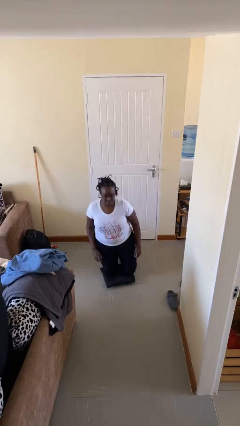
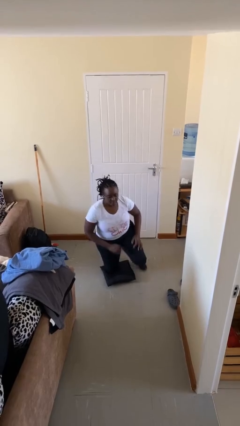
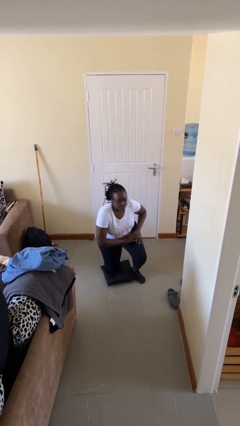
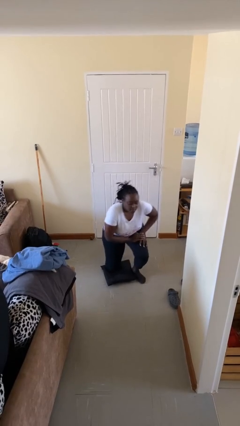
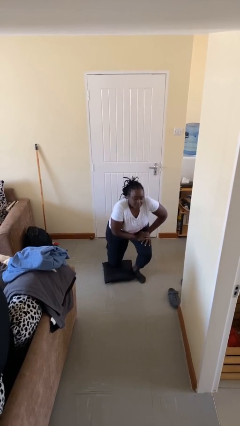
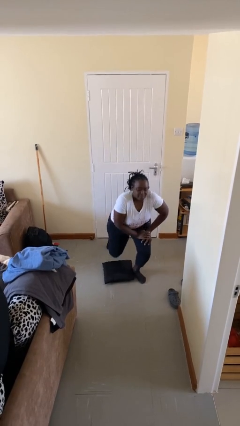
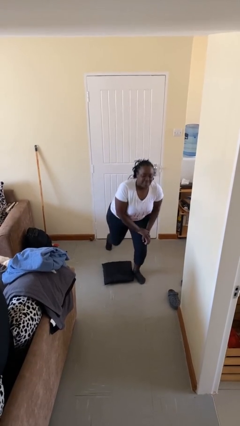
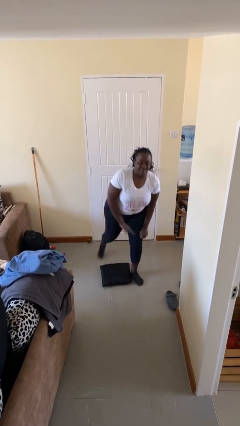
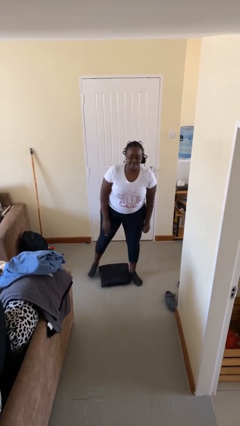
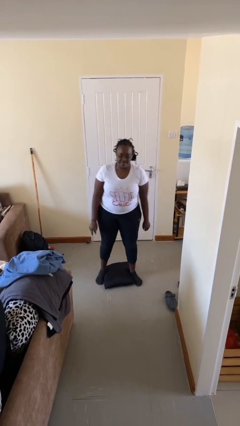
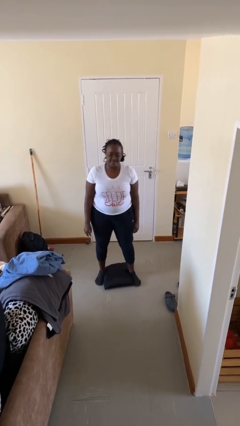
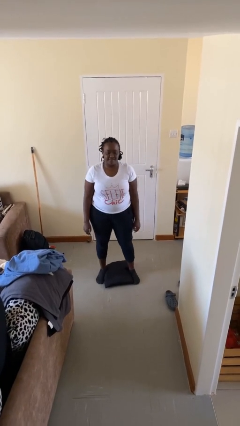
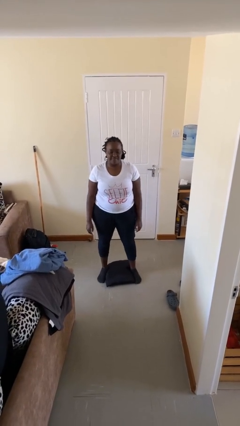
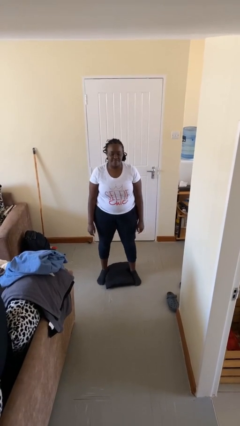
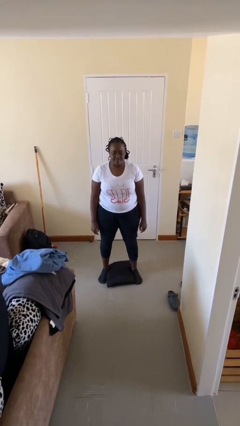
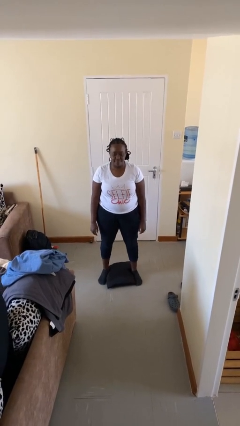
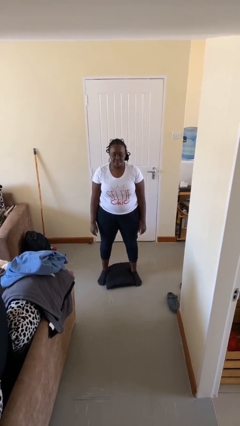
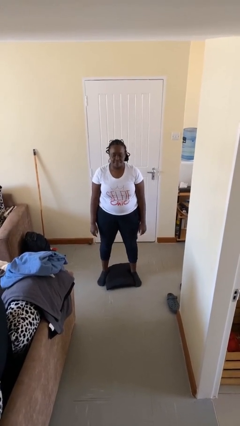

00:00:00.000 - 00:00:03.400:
person stands up from floor

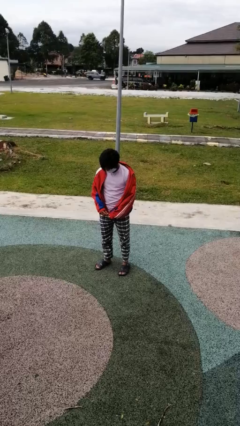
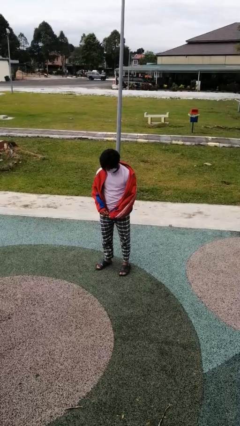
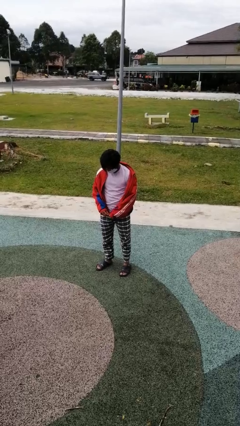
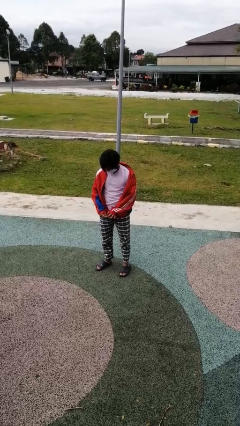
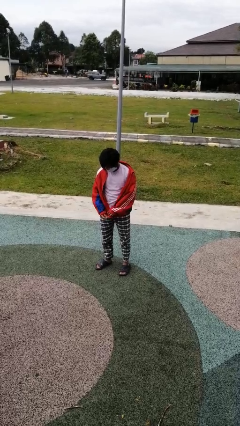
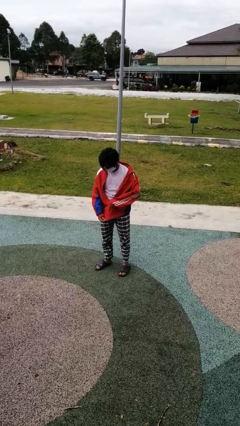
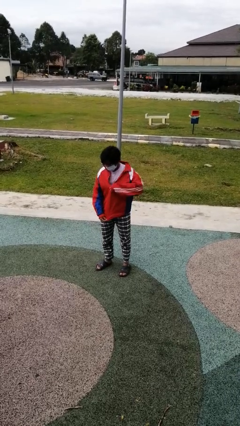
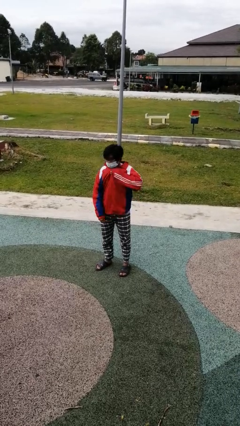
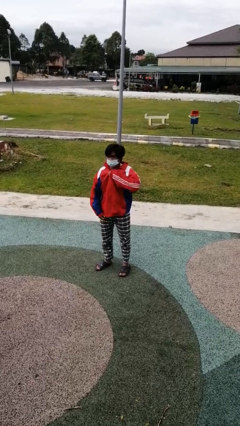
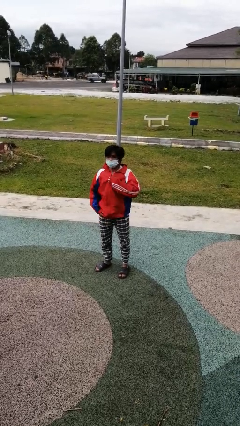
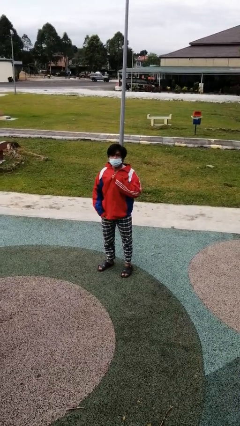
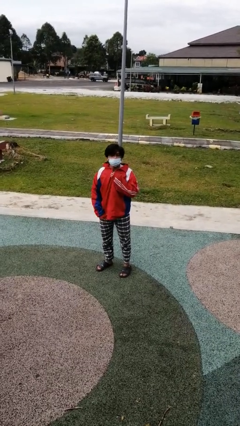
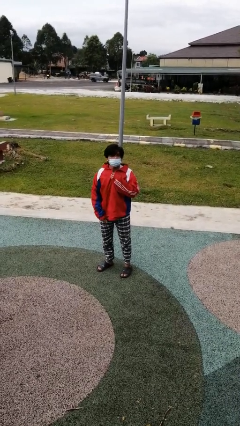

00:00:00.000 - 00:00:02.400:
person zips up jacket

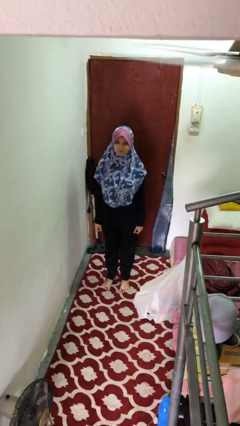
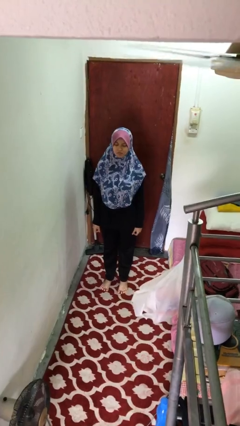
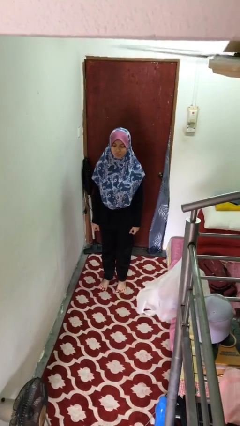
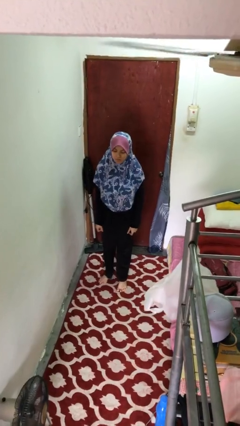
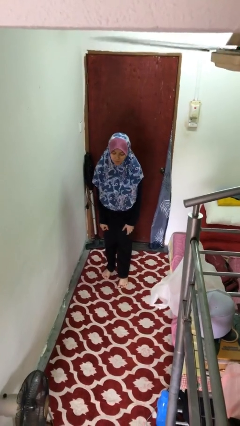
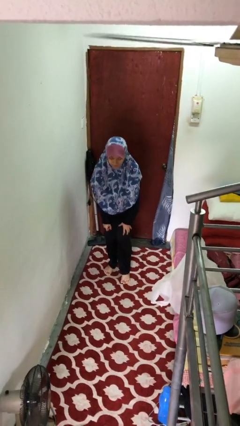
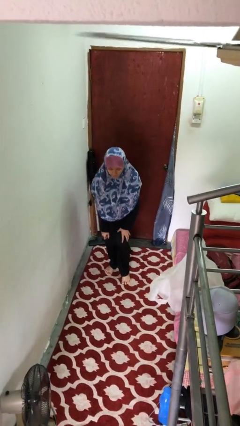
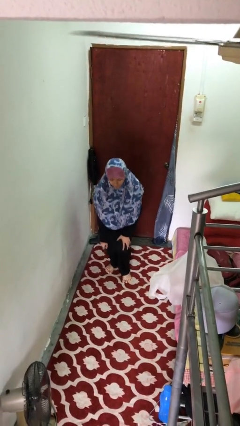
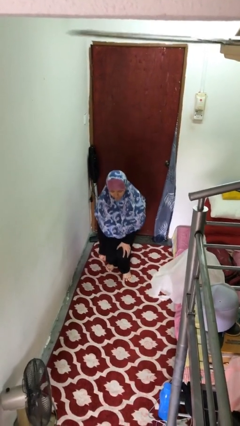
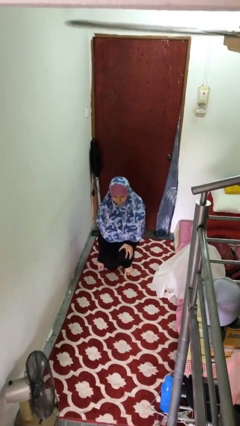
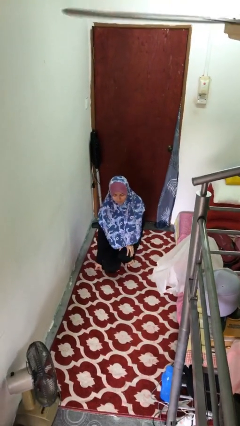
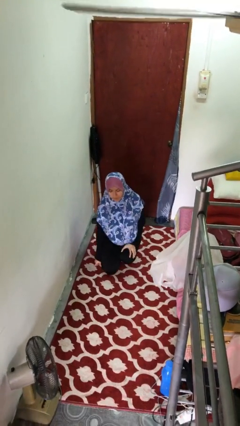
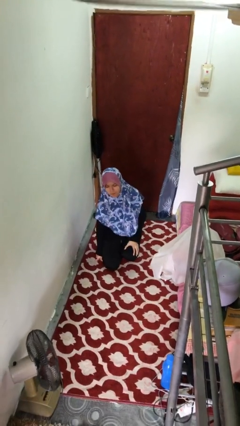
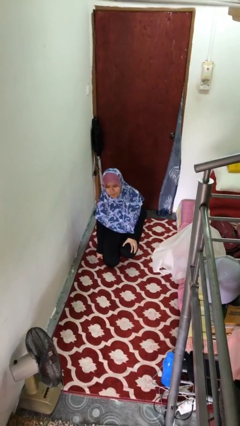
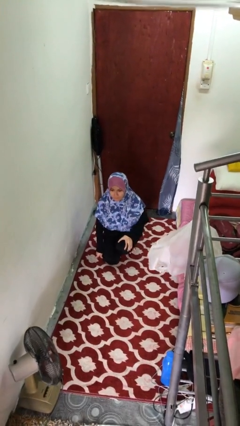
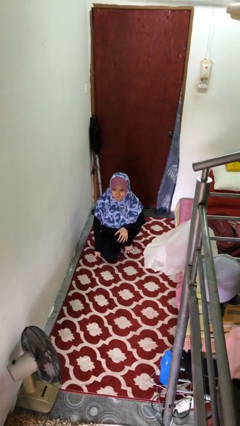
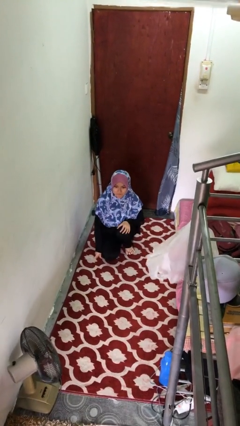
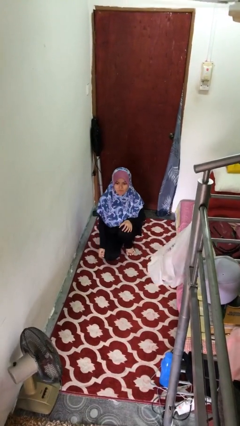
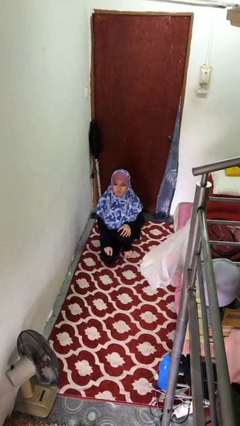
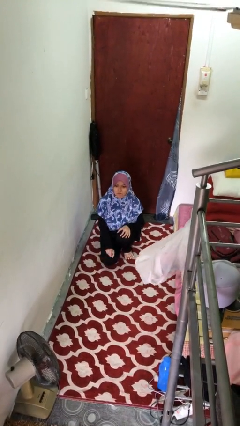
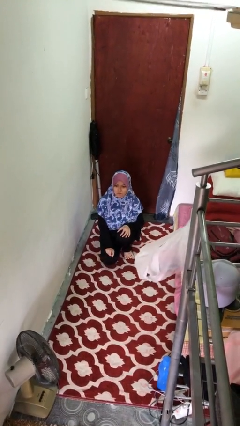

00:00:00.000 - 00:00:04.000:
person kneels

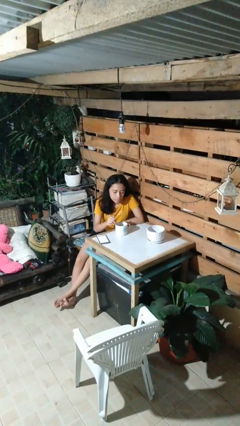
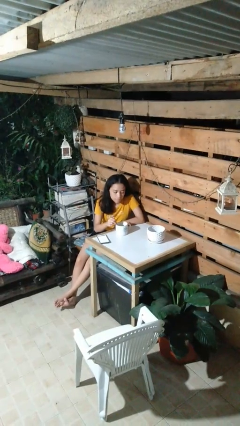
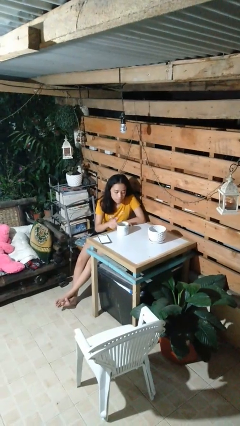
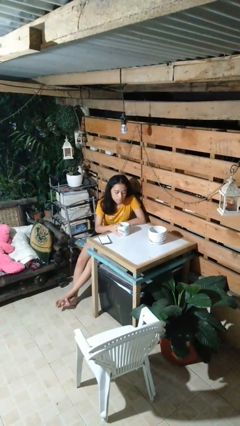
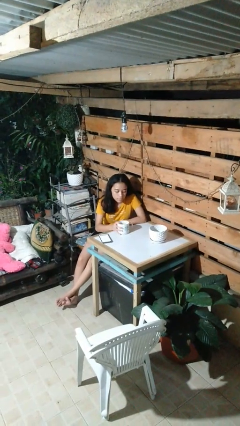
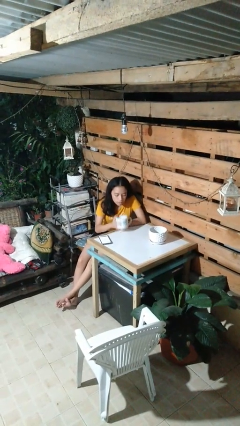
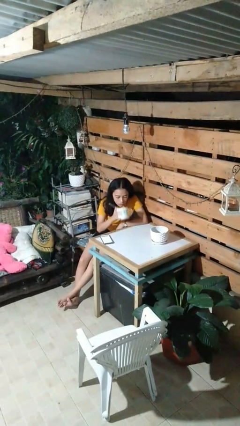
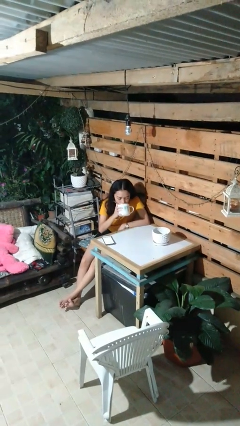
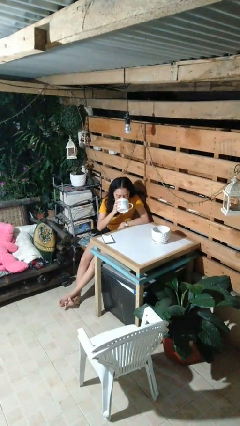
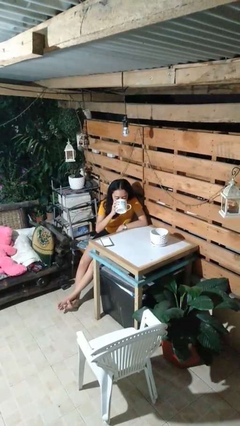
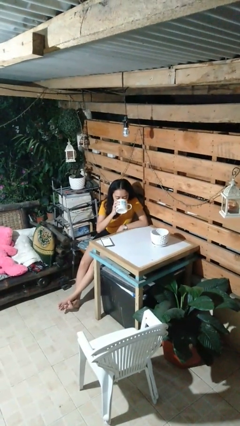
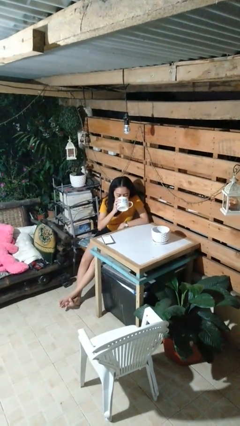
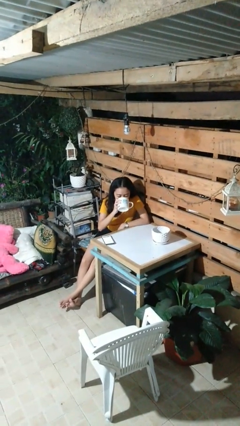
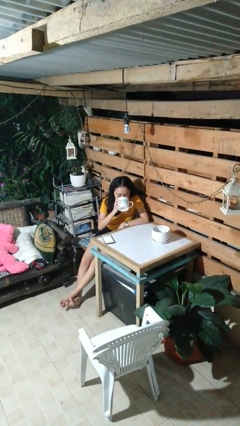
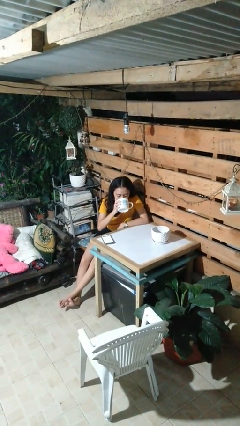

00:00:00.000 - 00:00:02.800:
person drinks from mug

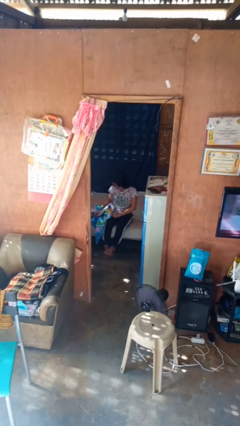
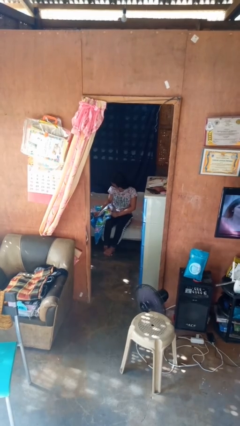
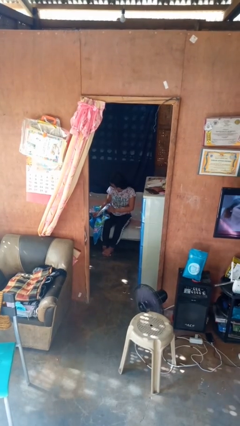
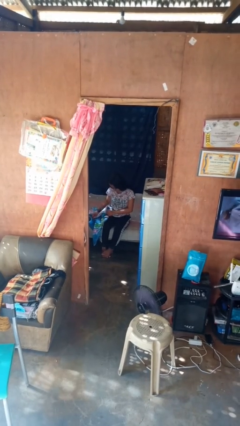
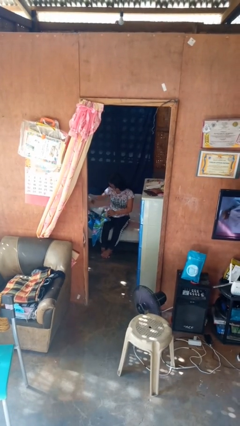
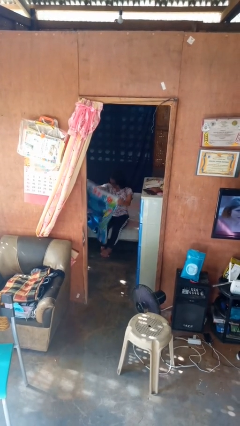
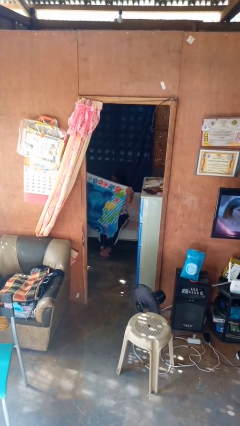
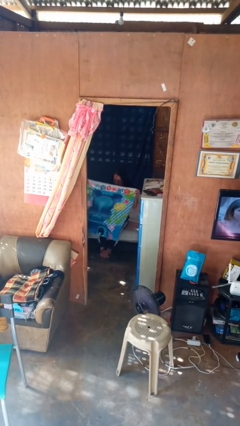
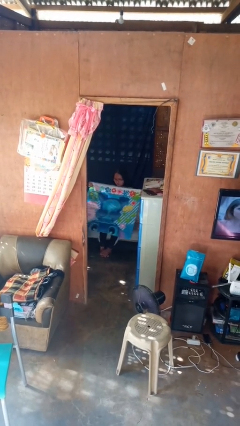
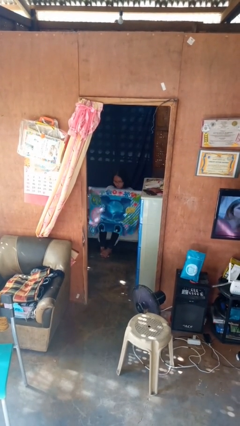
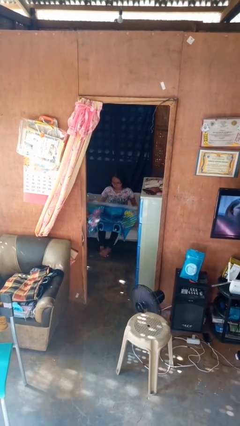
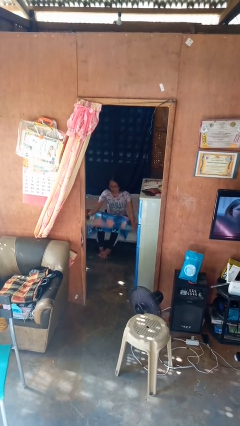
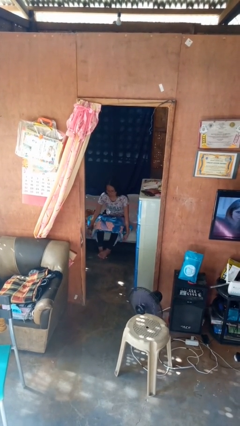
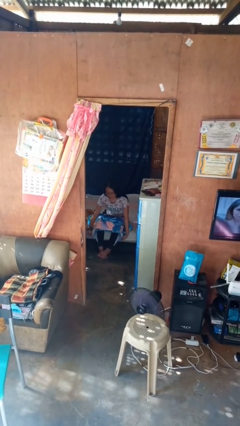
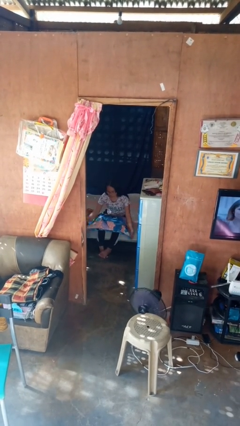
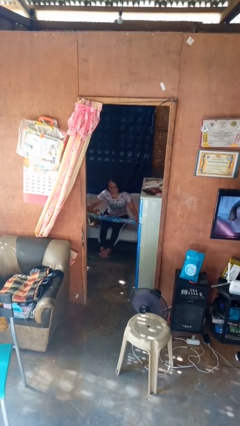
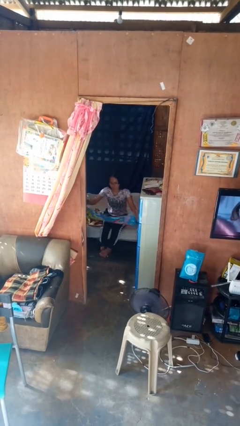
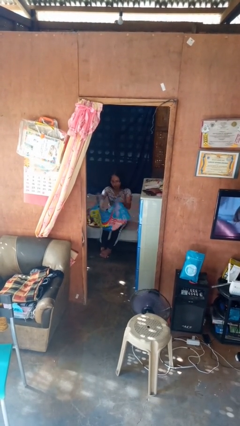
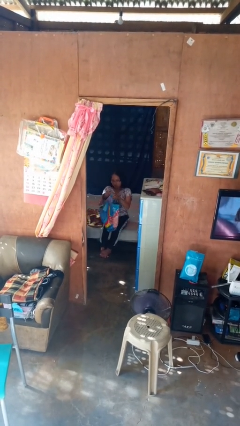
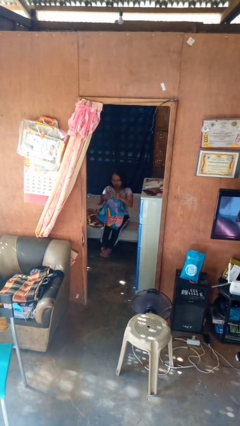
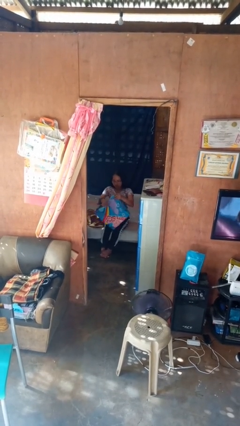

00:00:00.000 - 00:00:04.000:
person folds blanket

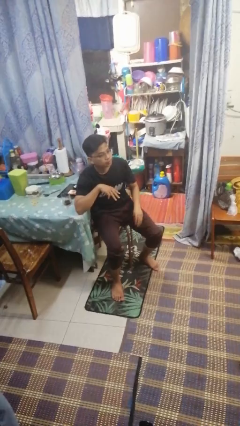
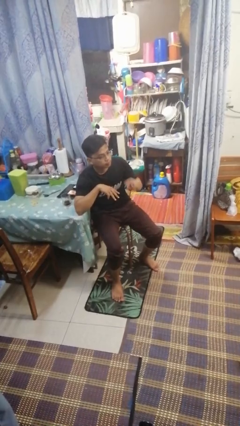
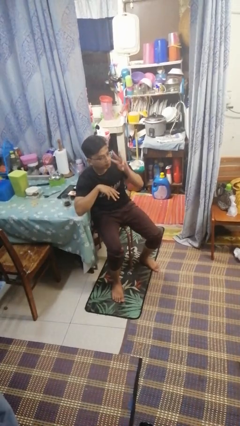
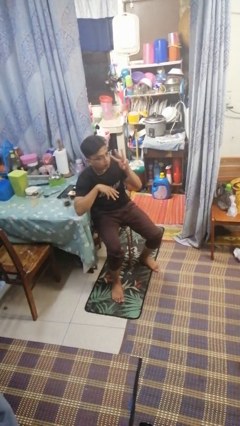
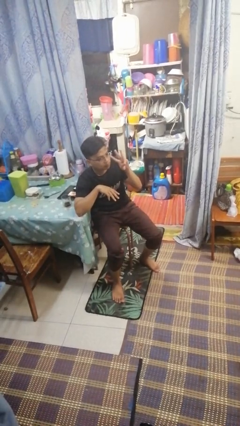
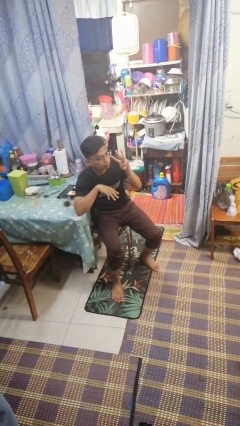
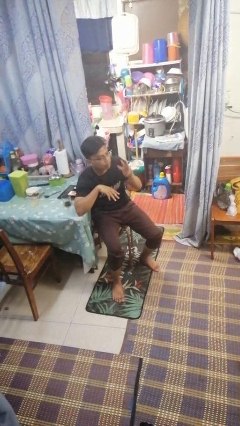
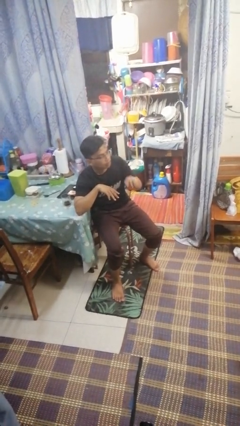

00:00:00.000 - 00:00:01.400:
person gestures number three
